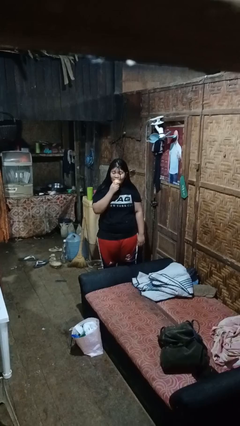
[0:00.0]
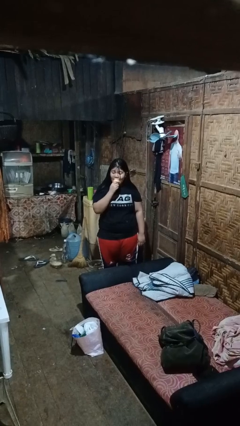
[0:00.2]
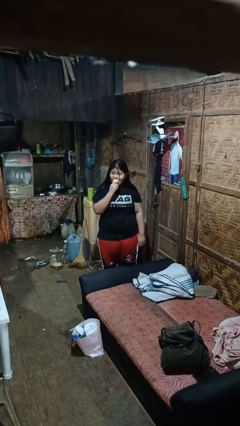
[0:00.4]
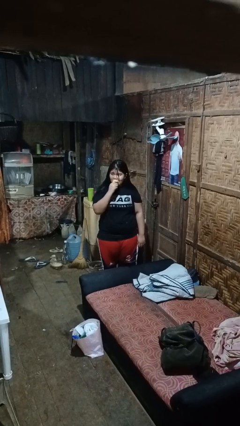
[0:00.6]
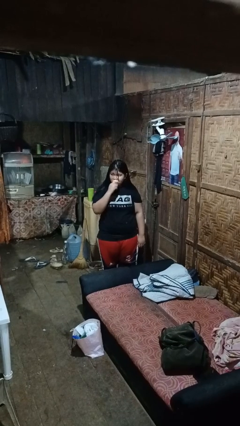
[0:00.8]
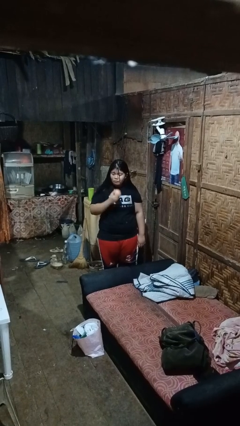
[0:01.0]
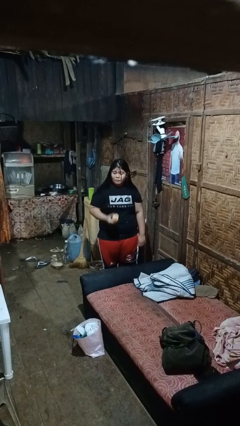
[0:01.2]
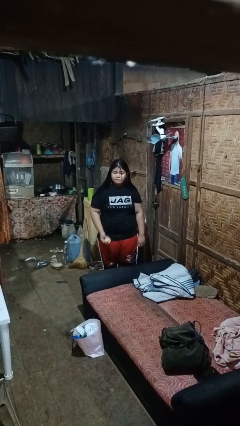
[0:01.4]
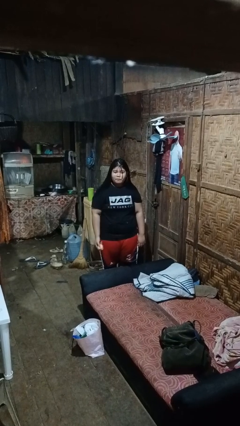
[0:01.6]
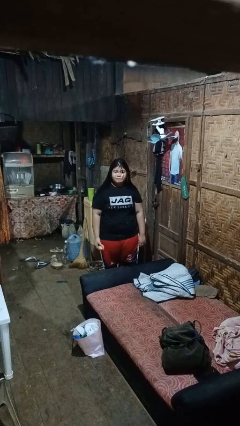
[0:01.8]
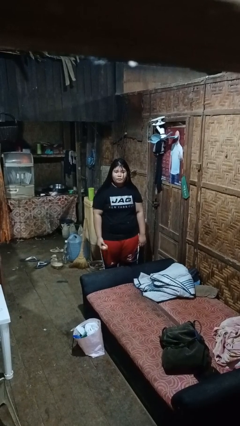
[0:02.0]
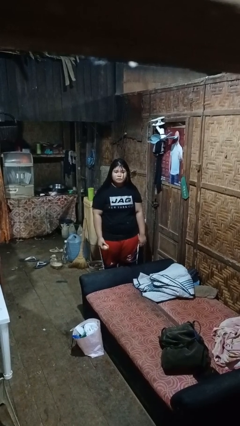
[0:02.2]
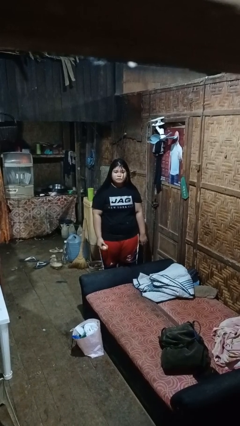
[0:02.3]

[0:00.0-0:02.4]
person eats apple

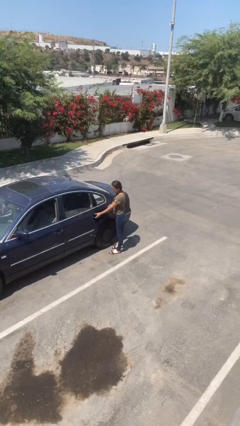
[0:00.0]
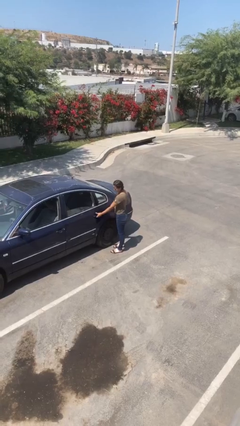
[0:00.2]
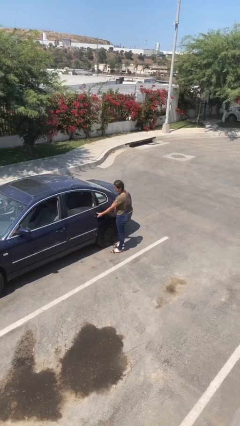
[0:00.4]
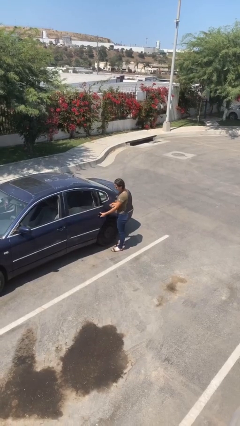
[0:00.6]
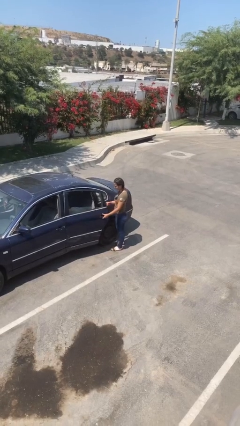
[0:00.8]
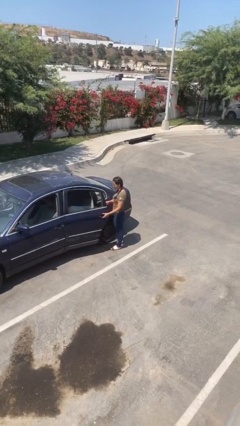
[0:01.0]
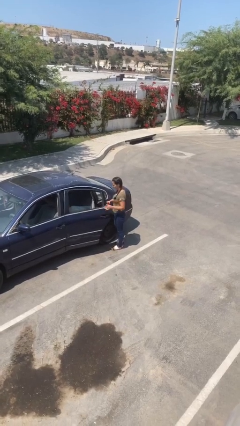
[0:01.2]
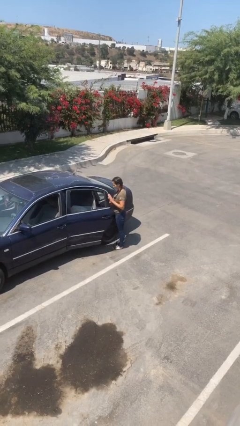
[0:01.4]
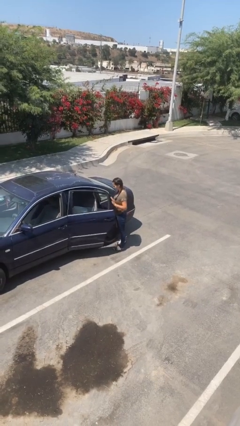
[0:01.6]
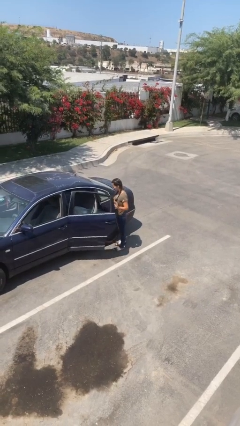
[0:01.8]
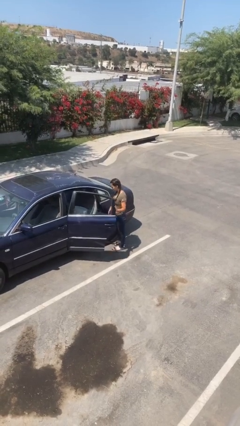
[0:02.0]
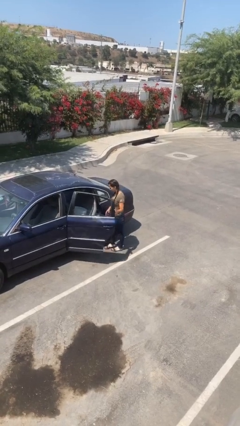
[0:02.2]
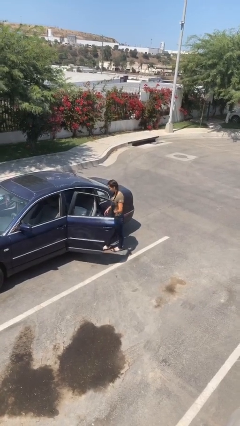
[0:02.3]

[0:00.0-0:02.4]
person opens car door

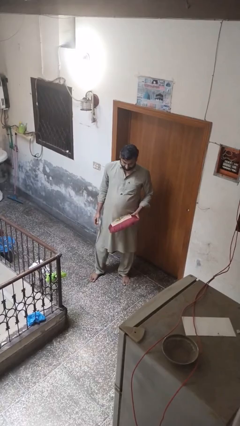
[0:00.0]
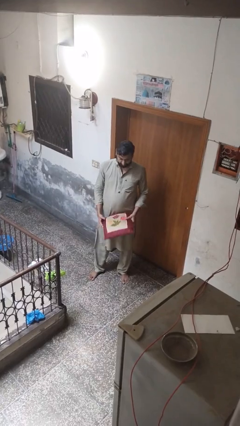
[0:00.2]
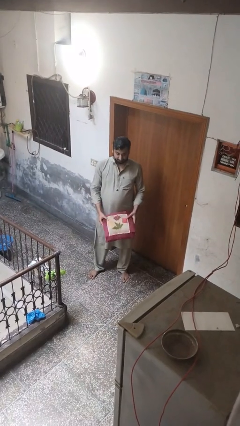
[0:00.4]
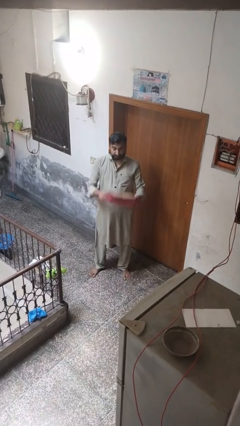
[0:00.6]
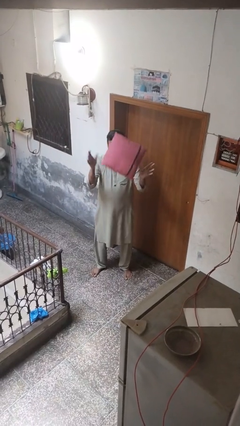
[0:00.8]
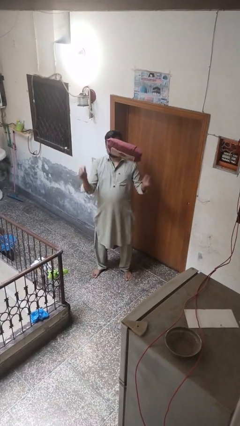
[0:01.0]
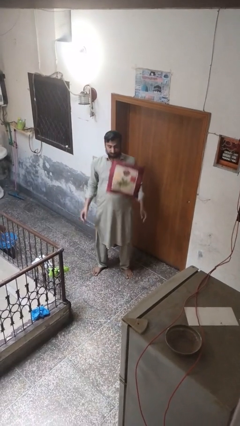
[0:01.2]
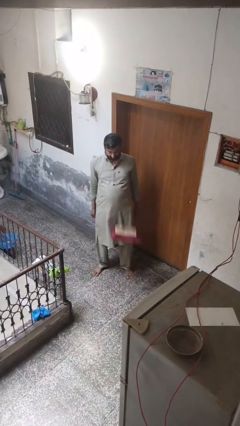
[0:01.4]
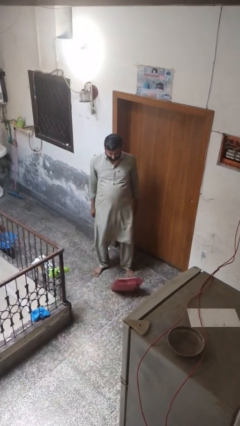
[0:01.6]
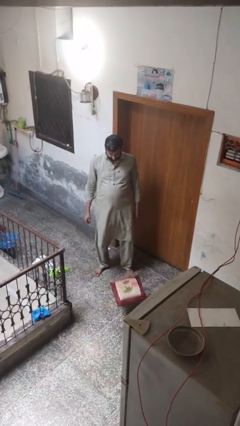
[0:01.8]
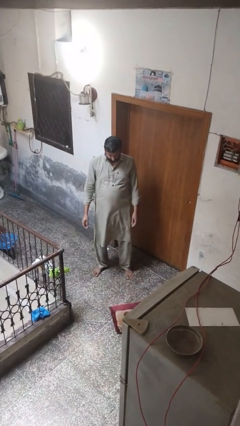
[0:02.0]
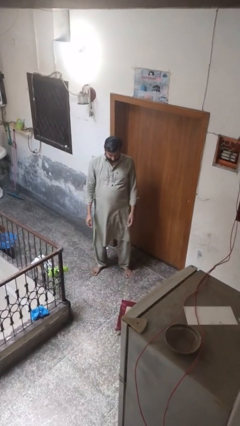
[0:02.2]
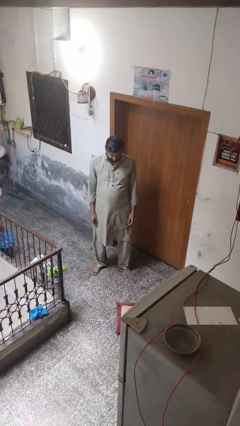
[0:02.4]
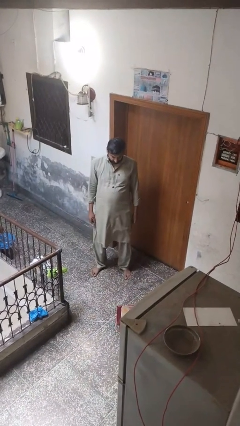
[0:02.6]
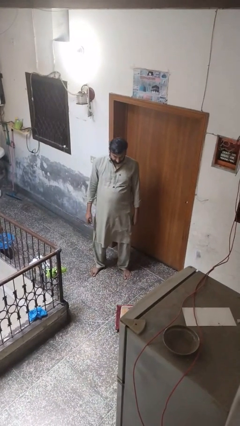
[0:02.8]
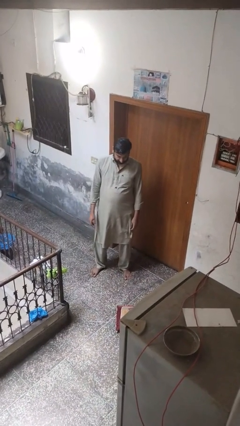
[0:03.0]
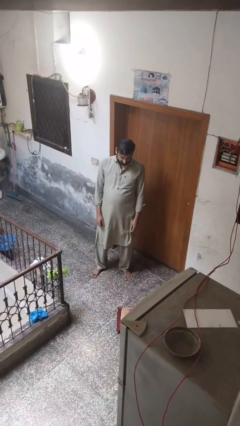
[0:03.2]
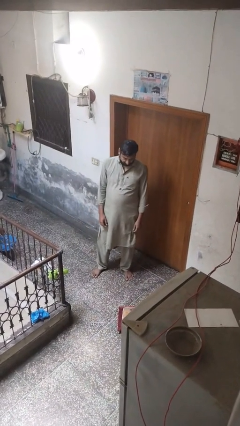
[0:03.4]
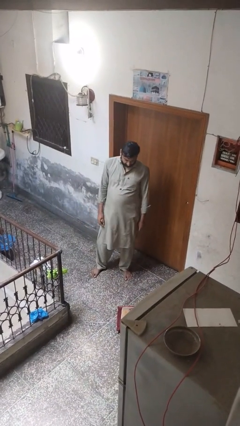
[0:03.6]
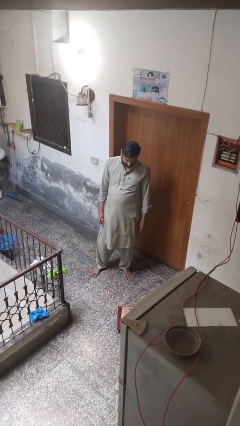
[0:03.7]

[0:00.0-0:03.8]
person throws object into air

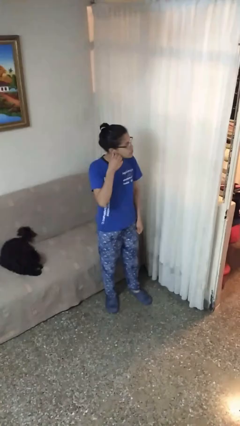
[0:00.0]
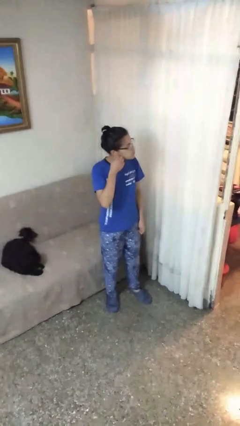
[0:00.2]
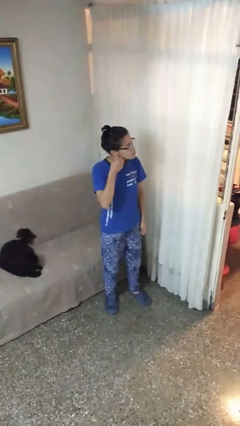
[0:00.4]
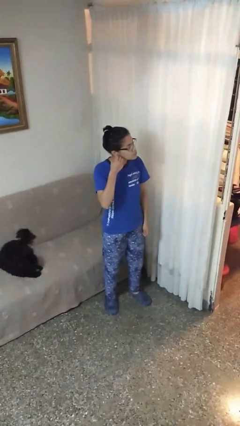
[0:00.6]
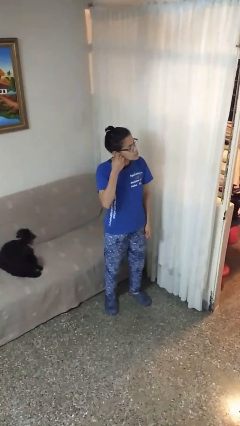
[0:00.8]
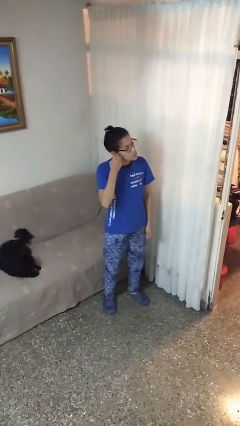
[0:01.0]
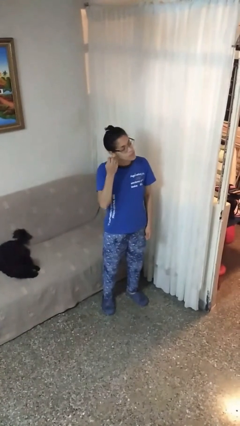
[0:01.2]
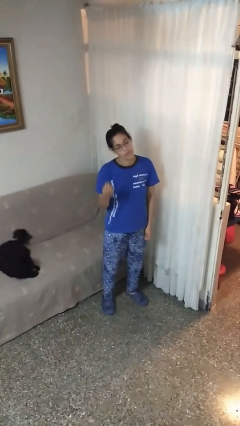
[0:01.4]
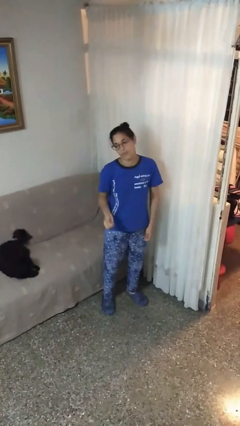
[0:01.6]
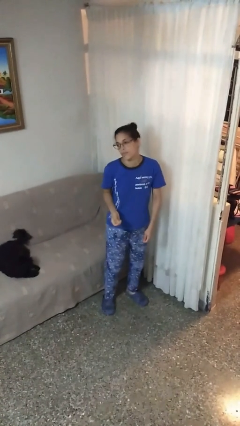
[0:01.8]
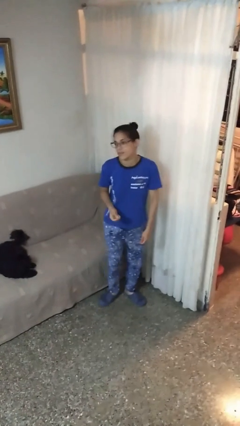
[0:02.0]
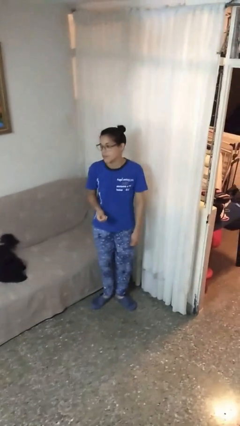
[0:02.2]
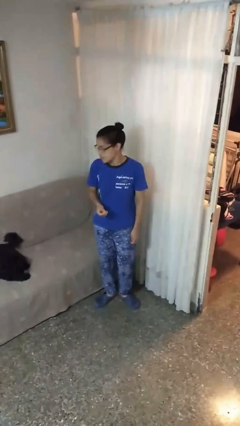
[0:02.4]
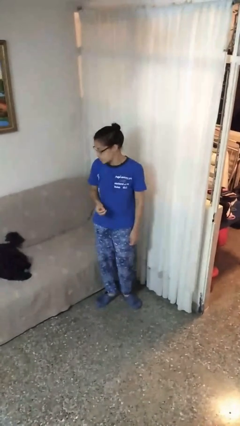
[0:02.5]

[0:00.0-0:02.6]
person takes off earrings

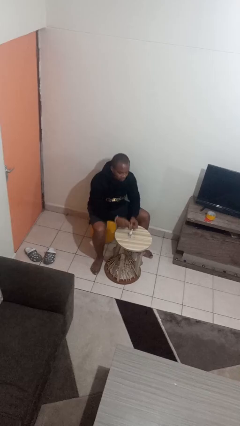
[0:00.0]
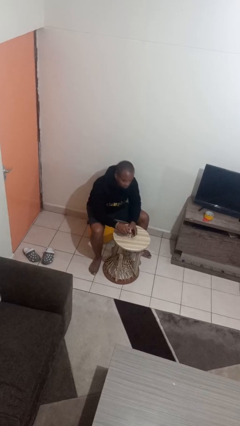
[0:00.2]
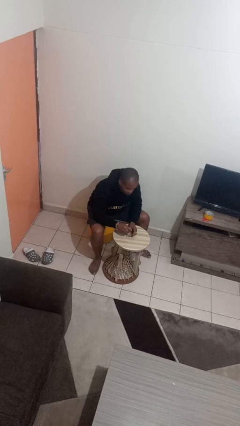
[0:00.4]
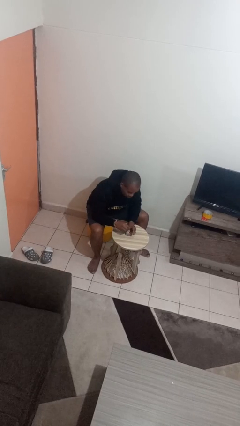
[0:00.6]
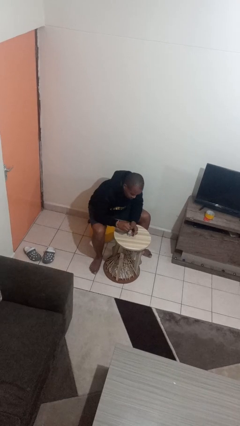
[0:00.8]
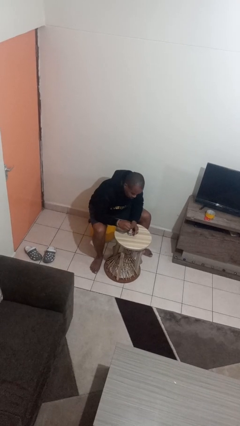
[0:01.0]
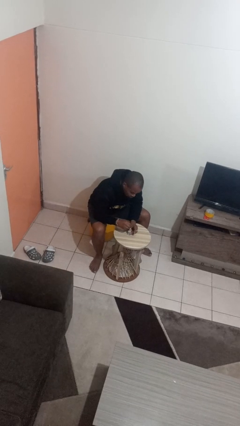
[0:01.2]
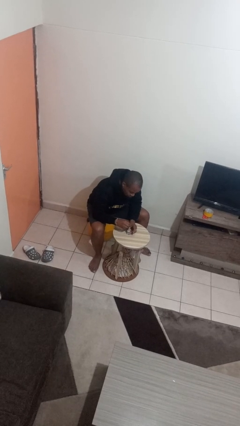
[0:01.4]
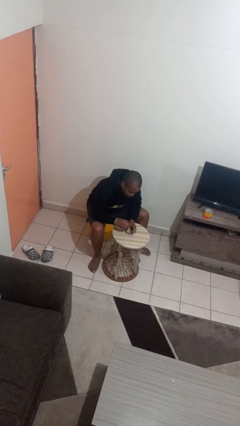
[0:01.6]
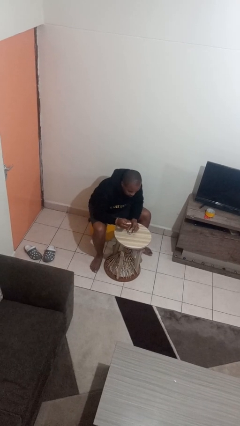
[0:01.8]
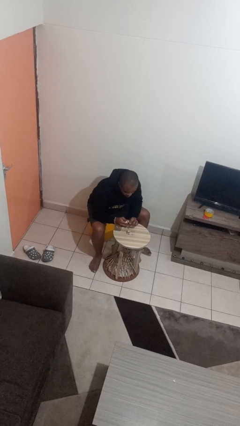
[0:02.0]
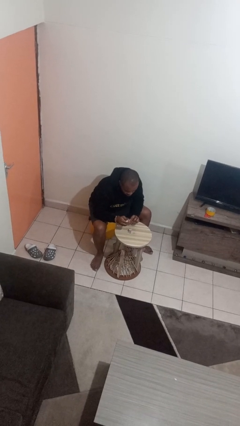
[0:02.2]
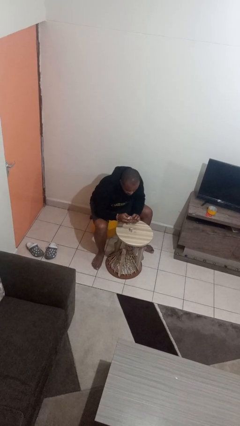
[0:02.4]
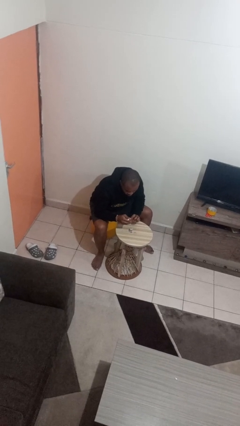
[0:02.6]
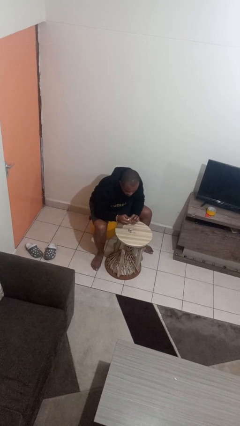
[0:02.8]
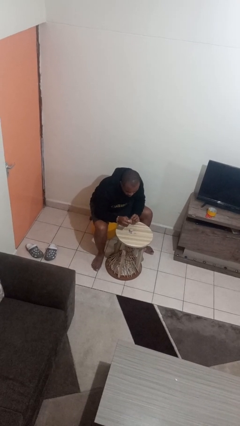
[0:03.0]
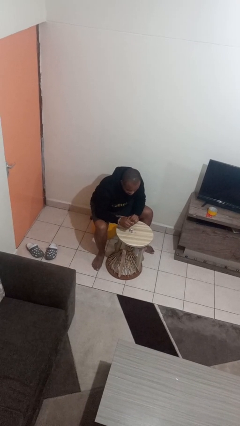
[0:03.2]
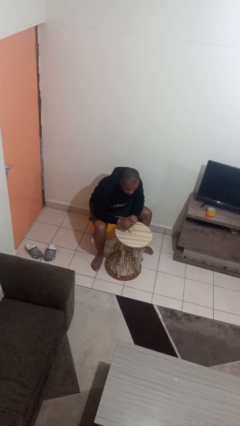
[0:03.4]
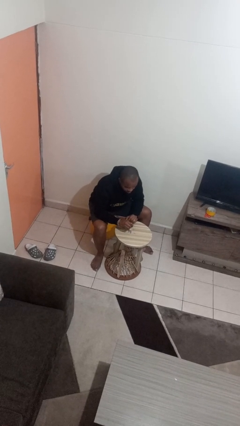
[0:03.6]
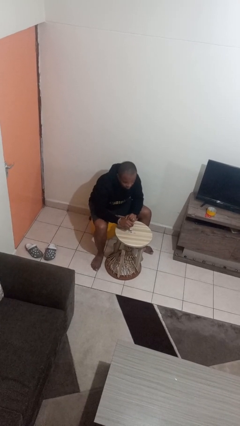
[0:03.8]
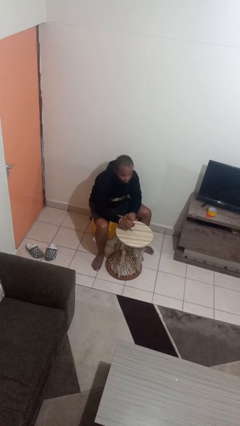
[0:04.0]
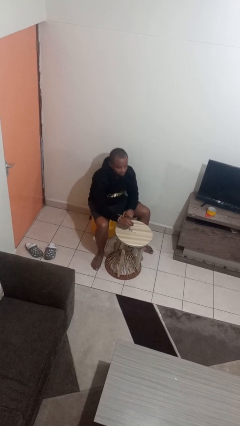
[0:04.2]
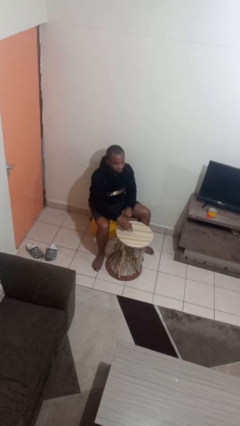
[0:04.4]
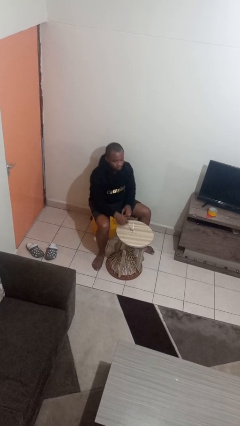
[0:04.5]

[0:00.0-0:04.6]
person paints fingernails

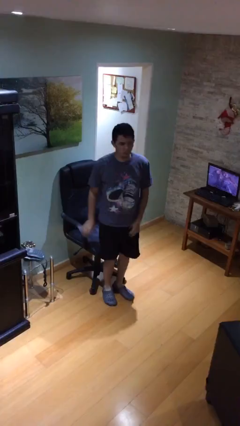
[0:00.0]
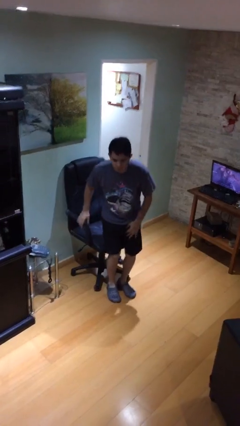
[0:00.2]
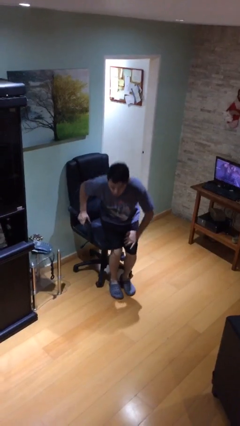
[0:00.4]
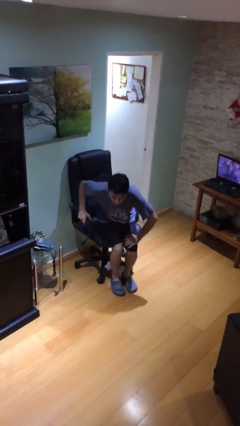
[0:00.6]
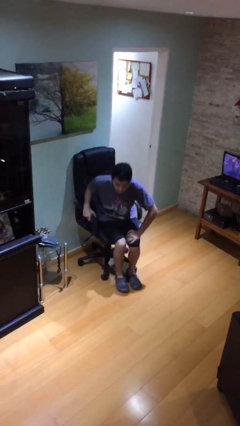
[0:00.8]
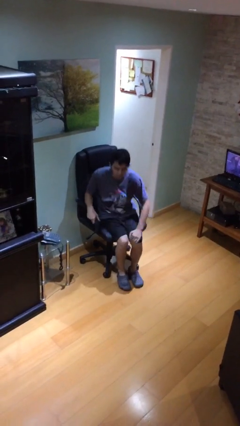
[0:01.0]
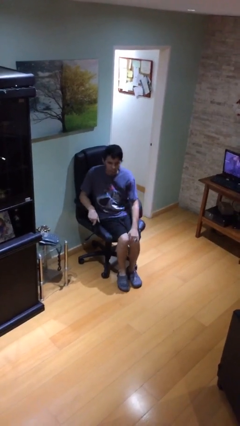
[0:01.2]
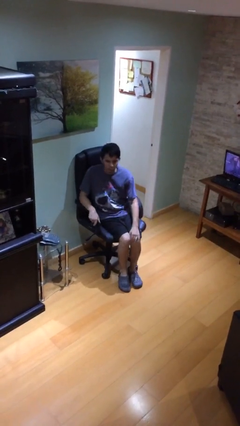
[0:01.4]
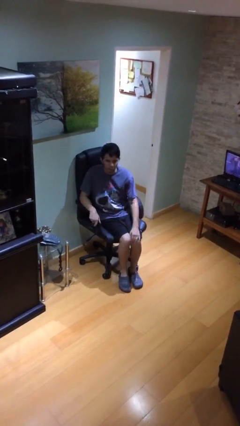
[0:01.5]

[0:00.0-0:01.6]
person sits down
